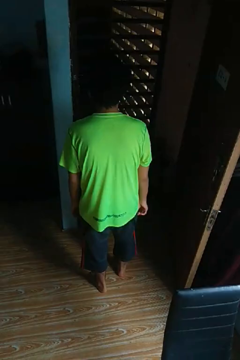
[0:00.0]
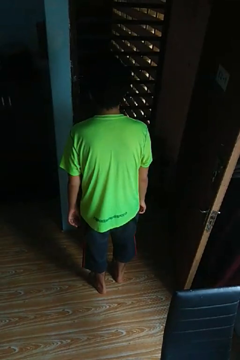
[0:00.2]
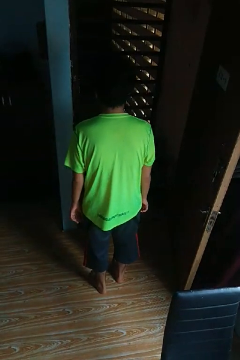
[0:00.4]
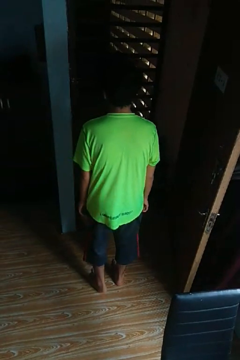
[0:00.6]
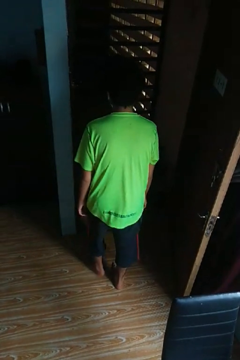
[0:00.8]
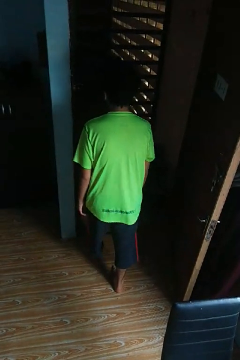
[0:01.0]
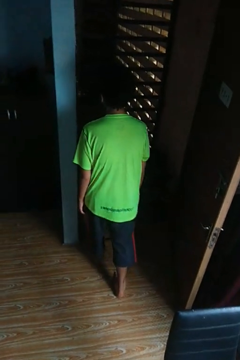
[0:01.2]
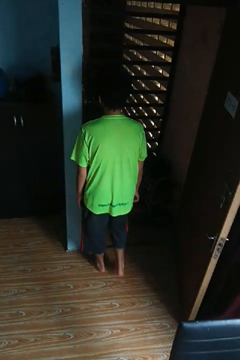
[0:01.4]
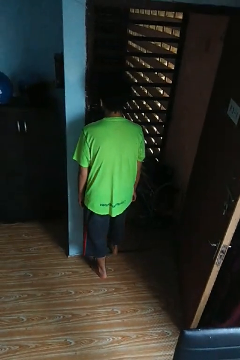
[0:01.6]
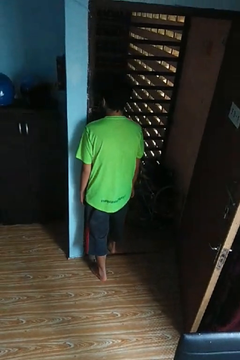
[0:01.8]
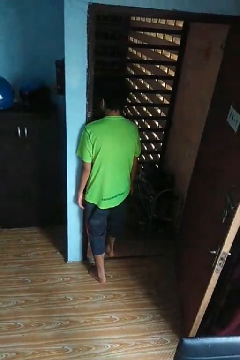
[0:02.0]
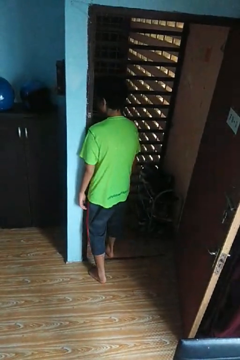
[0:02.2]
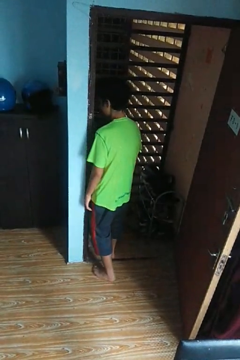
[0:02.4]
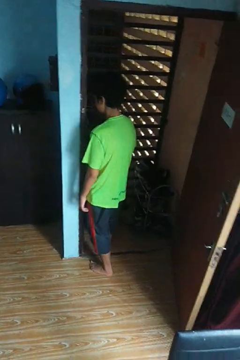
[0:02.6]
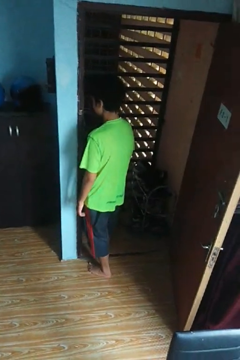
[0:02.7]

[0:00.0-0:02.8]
person bumps into wall

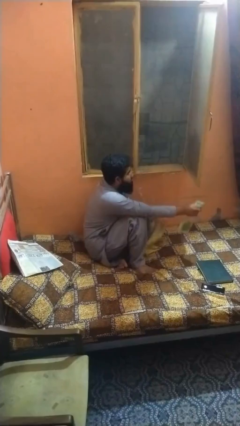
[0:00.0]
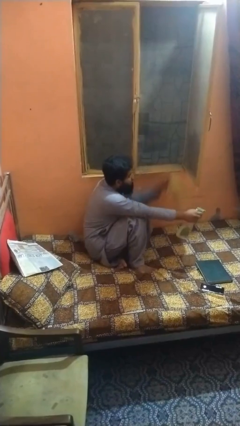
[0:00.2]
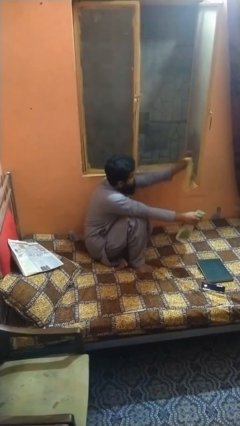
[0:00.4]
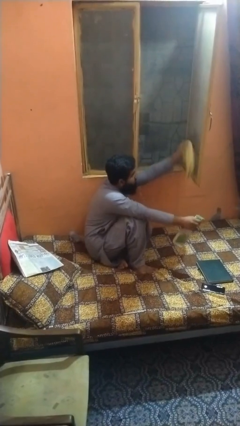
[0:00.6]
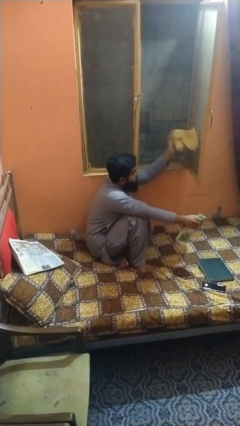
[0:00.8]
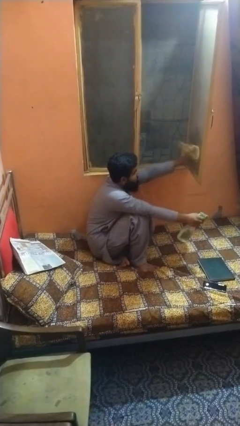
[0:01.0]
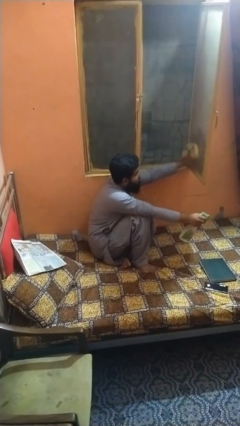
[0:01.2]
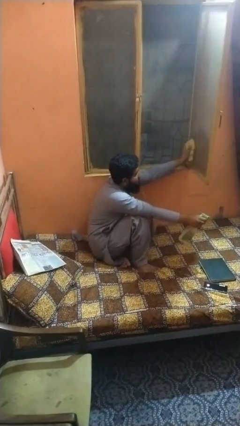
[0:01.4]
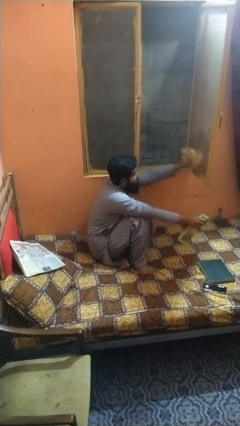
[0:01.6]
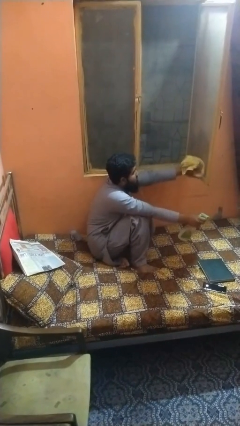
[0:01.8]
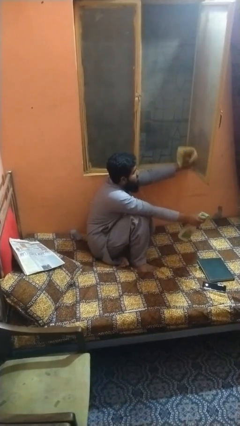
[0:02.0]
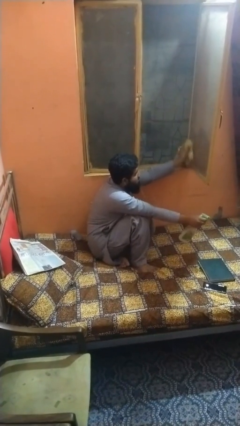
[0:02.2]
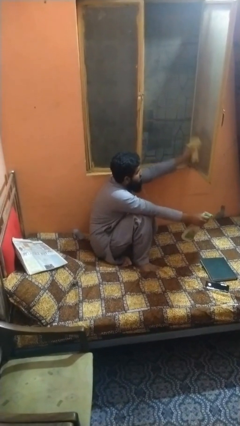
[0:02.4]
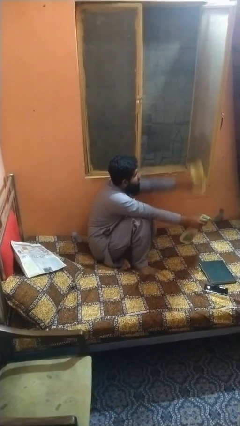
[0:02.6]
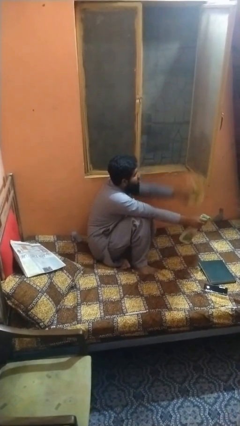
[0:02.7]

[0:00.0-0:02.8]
person washes window

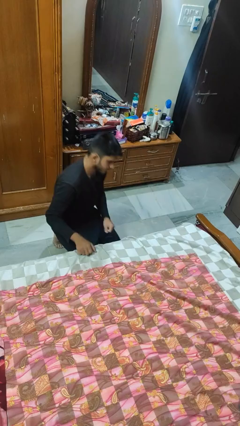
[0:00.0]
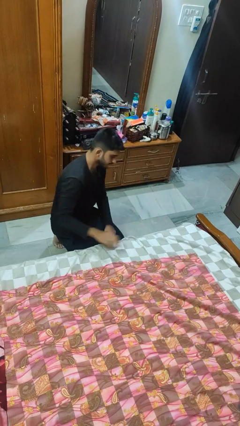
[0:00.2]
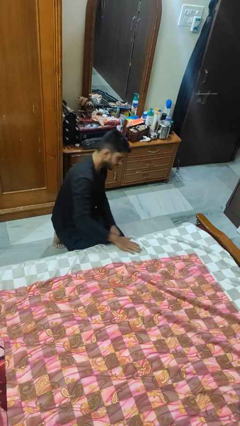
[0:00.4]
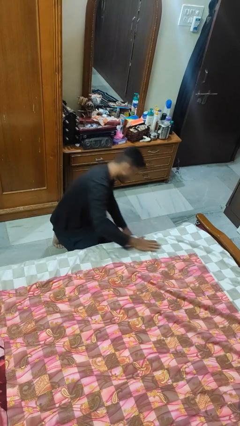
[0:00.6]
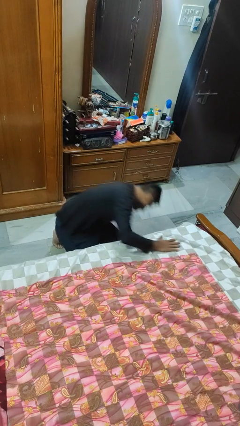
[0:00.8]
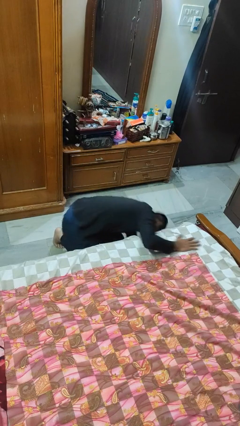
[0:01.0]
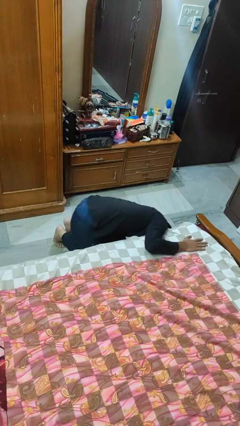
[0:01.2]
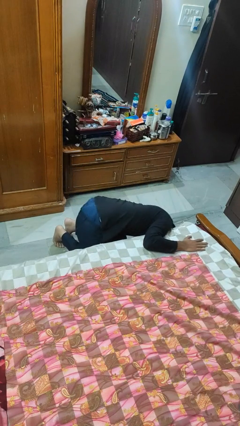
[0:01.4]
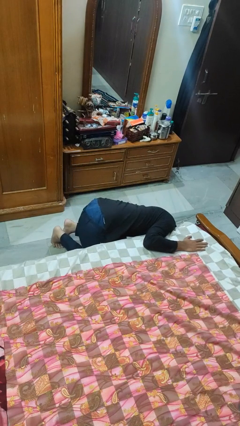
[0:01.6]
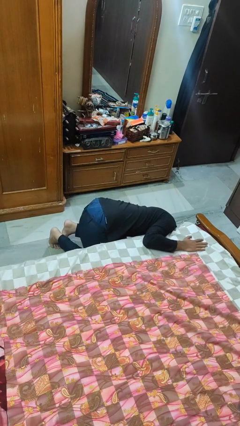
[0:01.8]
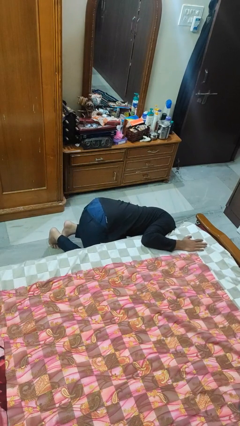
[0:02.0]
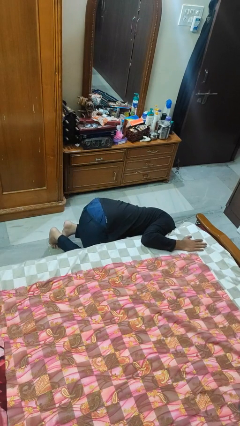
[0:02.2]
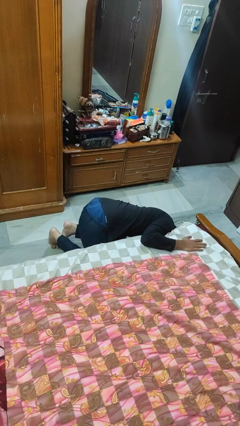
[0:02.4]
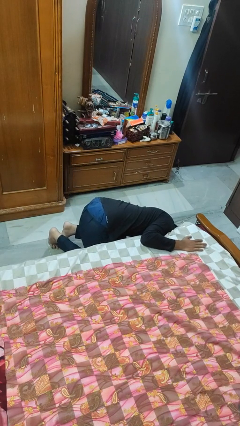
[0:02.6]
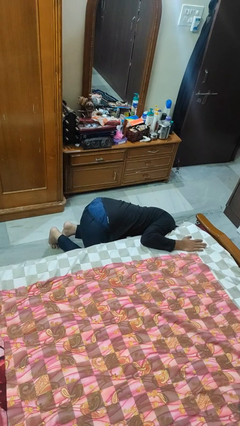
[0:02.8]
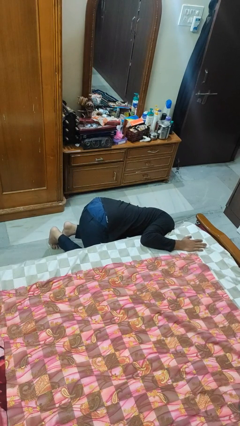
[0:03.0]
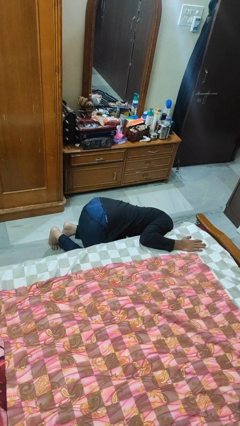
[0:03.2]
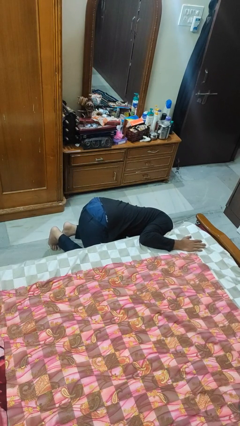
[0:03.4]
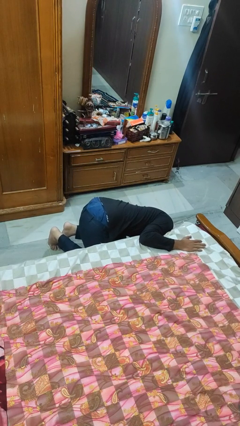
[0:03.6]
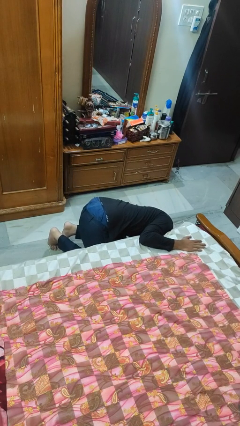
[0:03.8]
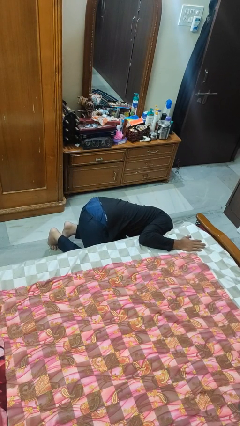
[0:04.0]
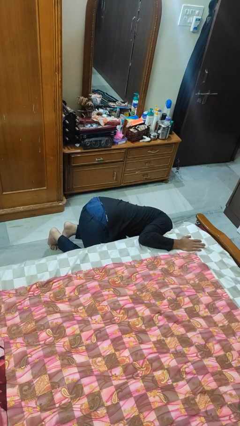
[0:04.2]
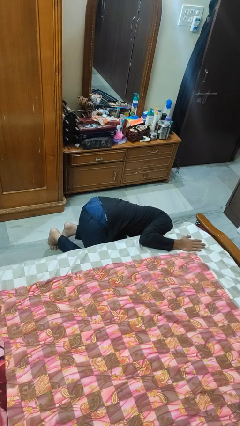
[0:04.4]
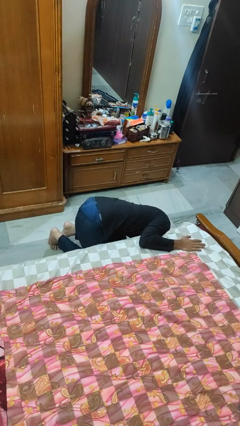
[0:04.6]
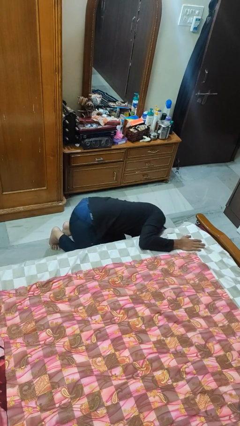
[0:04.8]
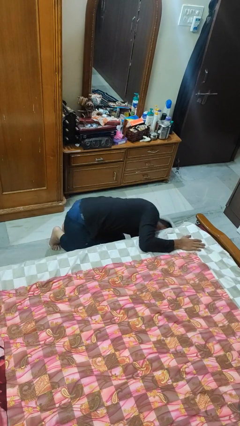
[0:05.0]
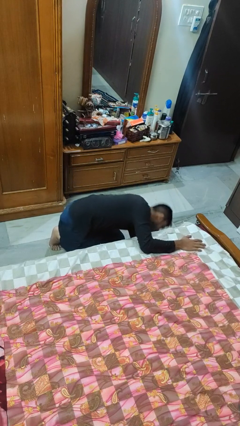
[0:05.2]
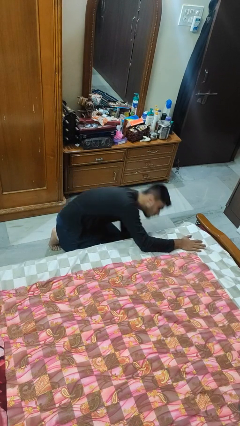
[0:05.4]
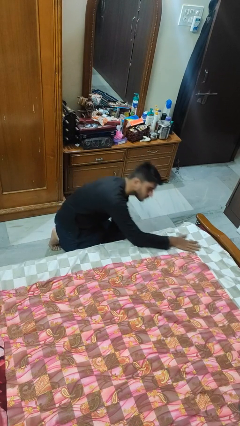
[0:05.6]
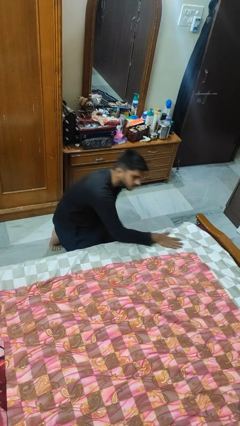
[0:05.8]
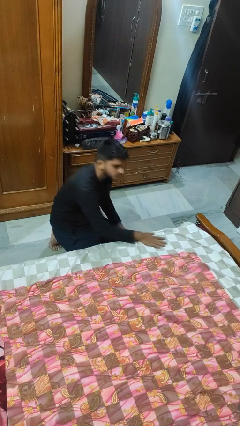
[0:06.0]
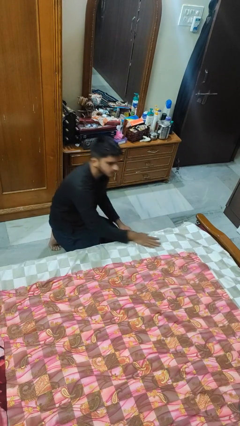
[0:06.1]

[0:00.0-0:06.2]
person searches under bed

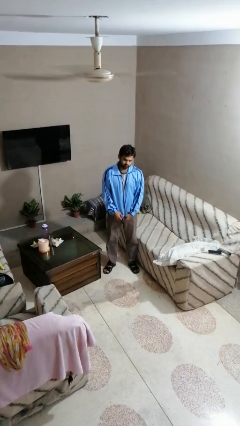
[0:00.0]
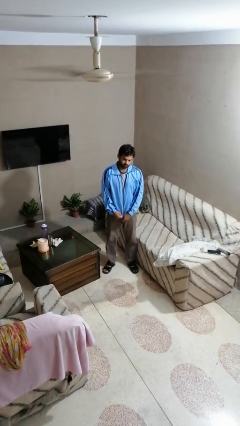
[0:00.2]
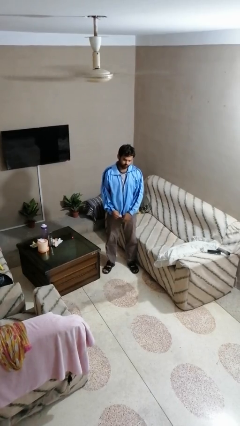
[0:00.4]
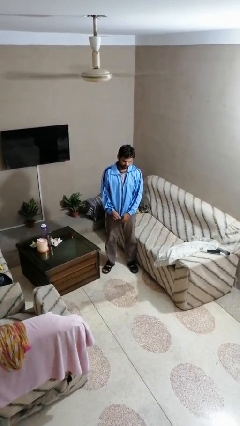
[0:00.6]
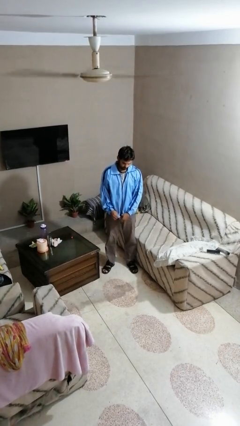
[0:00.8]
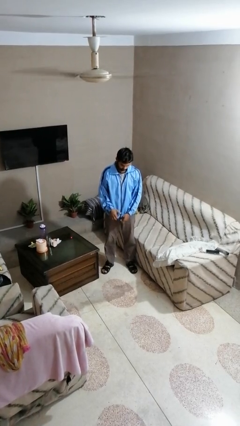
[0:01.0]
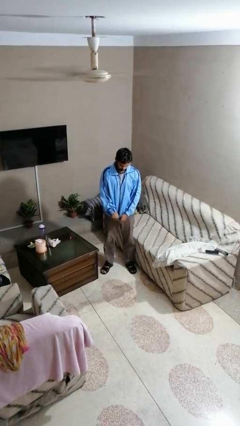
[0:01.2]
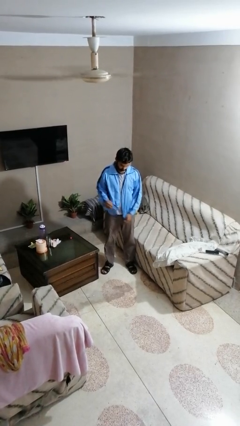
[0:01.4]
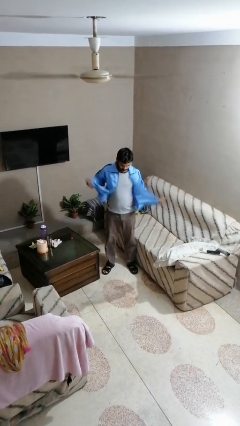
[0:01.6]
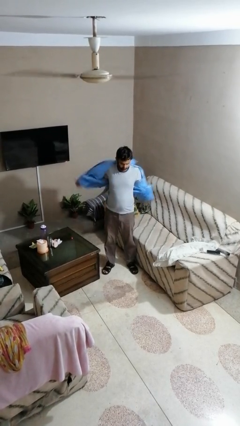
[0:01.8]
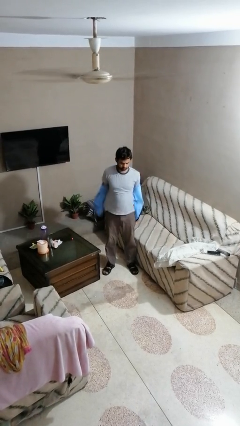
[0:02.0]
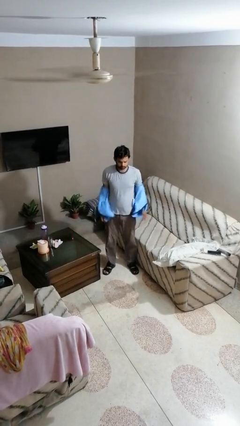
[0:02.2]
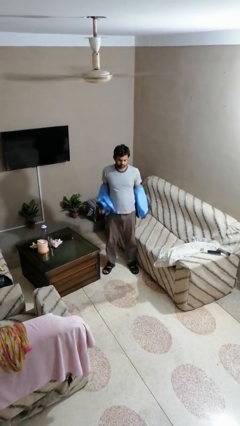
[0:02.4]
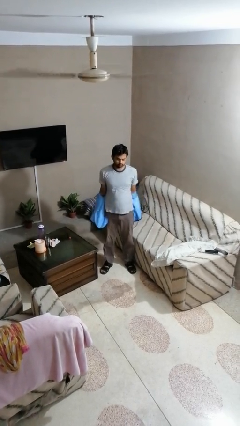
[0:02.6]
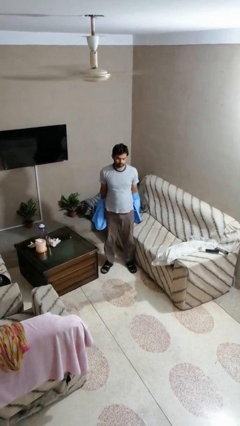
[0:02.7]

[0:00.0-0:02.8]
person takes off jacket

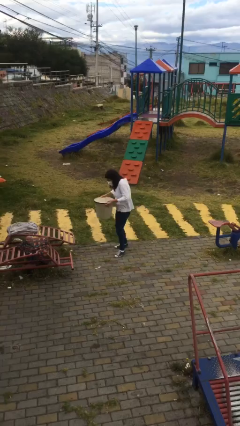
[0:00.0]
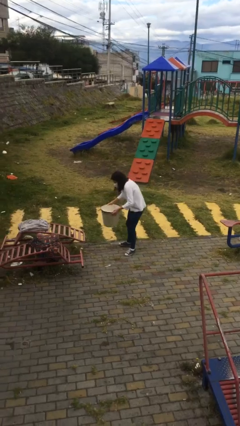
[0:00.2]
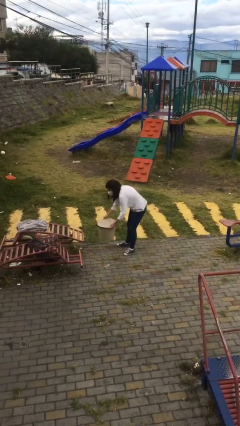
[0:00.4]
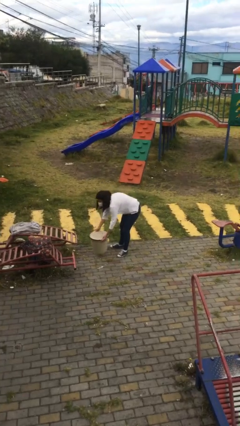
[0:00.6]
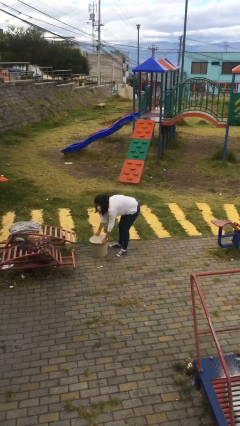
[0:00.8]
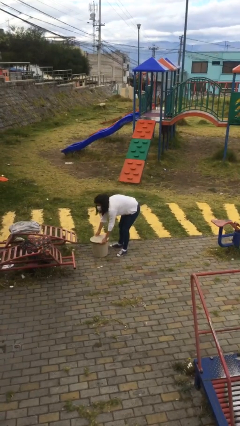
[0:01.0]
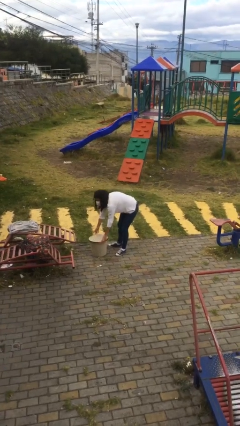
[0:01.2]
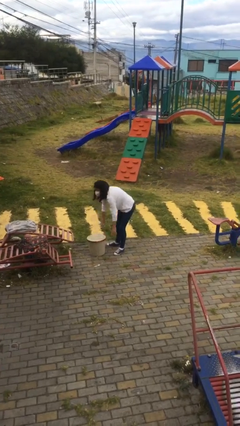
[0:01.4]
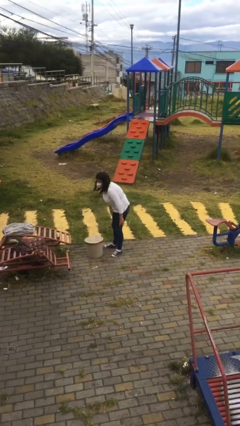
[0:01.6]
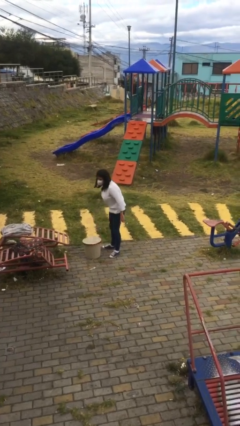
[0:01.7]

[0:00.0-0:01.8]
person puts down object on floor

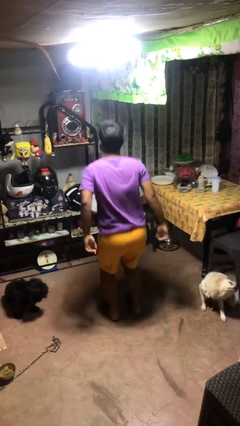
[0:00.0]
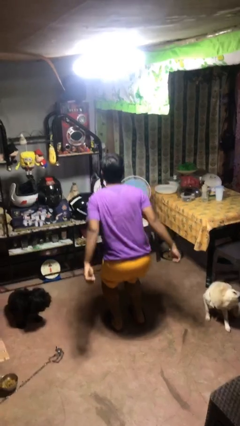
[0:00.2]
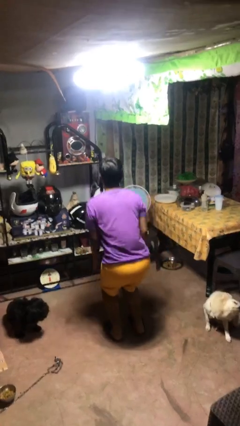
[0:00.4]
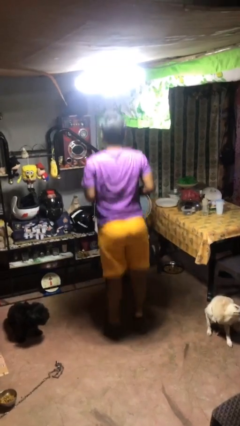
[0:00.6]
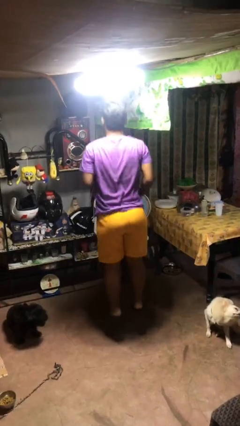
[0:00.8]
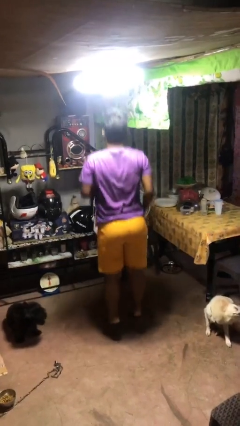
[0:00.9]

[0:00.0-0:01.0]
person jumps
